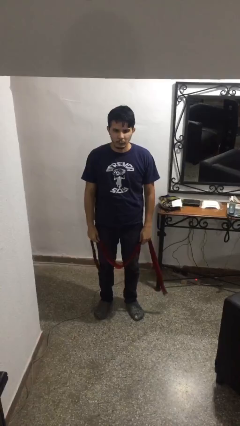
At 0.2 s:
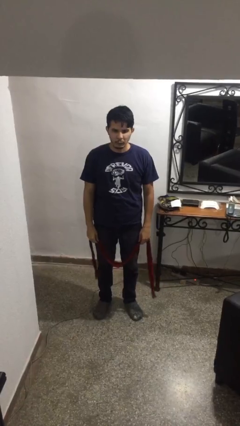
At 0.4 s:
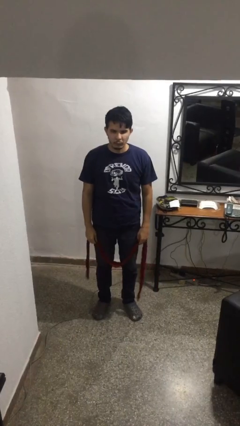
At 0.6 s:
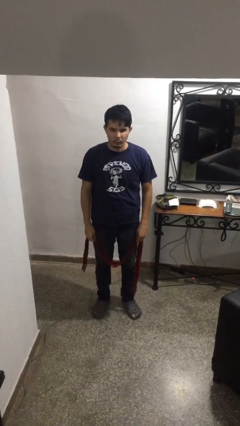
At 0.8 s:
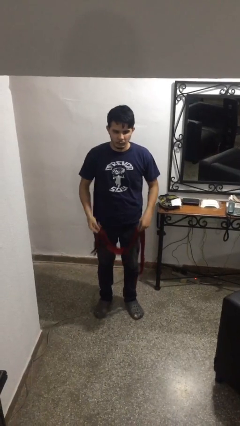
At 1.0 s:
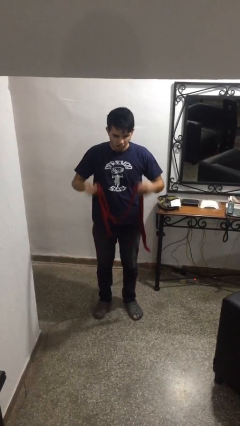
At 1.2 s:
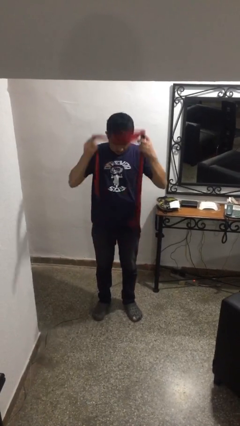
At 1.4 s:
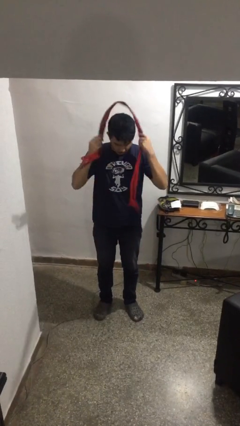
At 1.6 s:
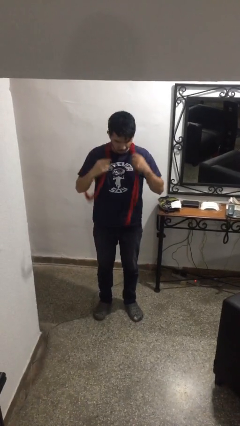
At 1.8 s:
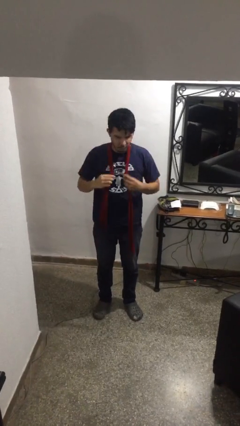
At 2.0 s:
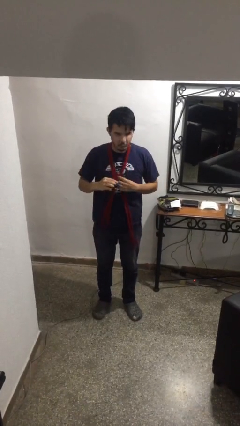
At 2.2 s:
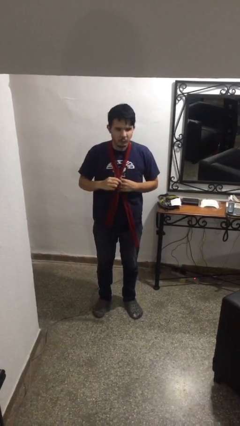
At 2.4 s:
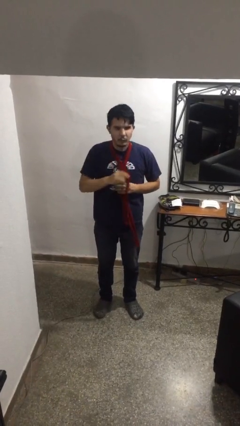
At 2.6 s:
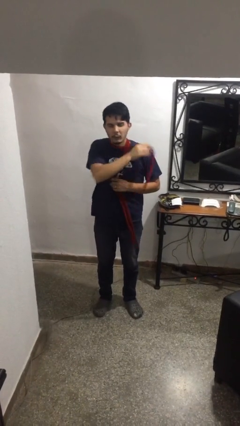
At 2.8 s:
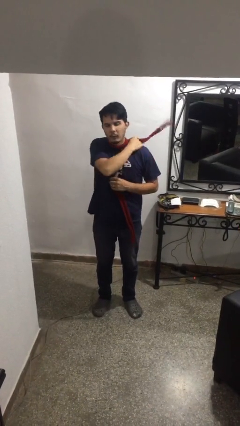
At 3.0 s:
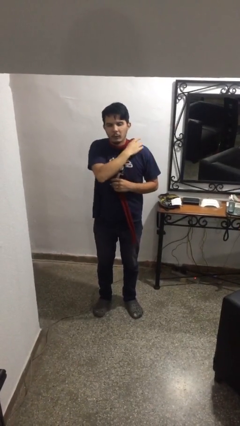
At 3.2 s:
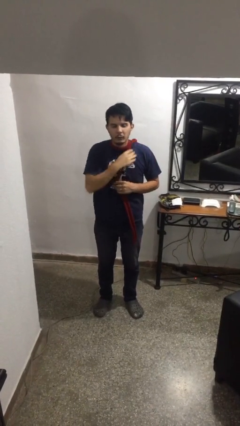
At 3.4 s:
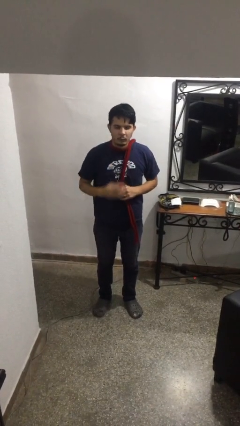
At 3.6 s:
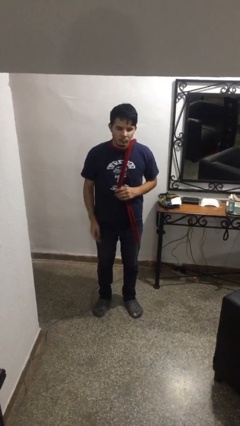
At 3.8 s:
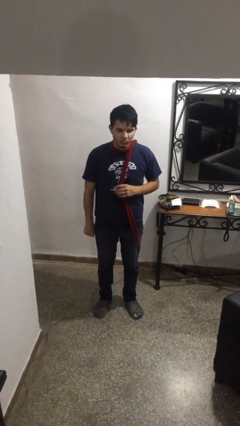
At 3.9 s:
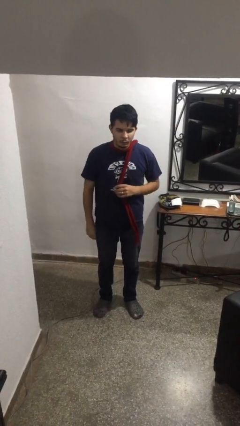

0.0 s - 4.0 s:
person puts on scarf

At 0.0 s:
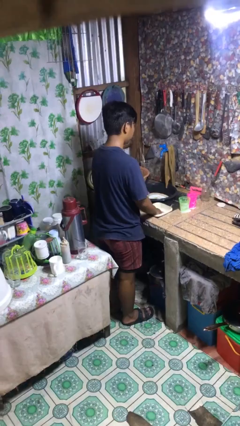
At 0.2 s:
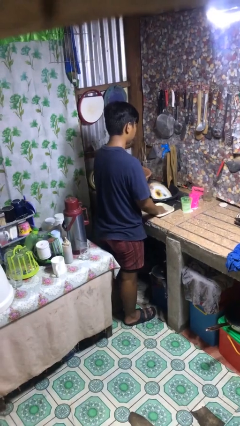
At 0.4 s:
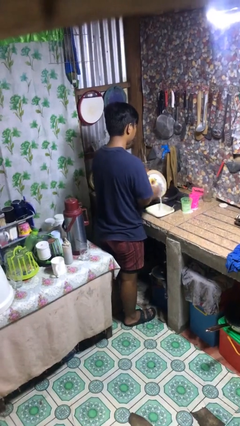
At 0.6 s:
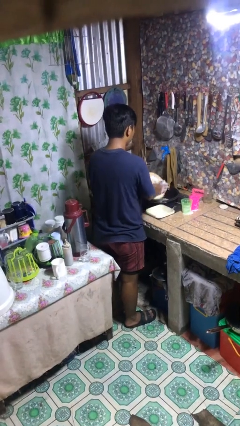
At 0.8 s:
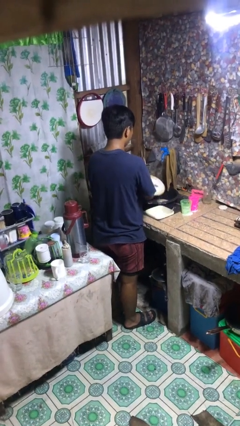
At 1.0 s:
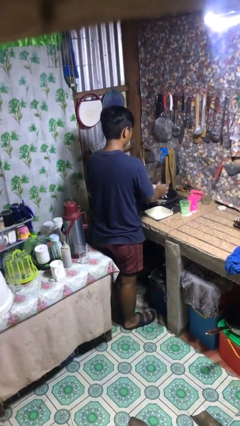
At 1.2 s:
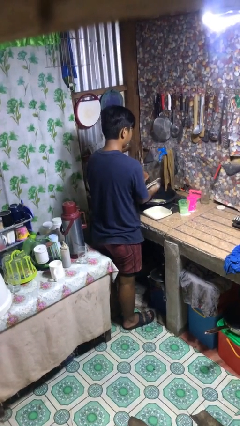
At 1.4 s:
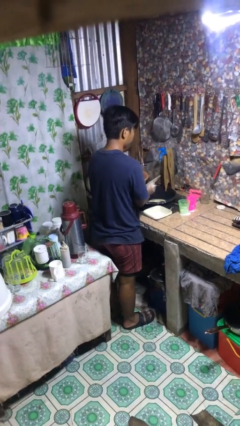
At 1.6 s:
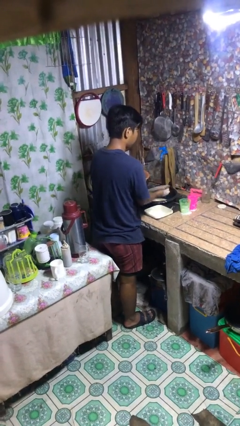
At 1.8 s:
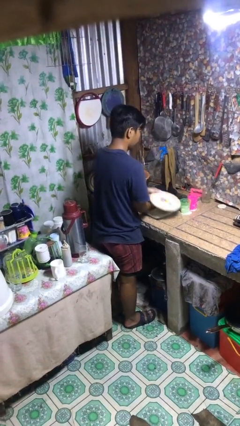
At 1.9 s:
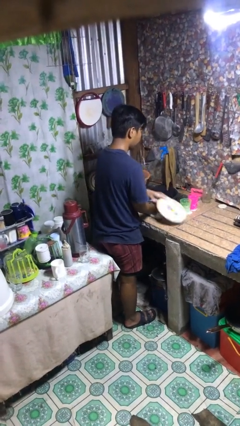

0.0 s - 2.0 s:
person washes dish

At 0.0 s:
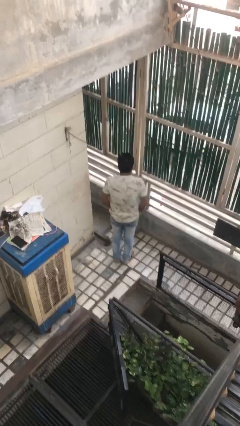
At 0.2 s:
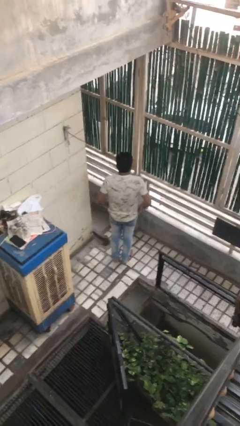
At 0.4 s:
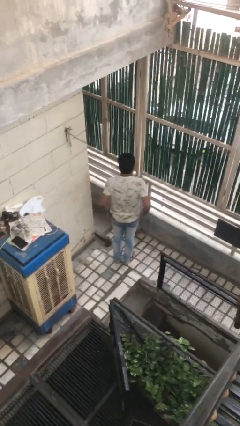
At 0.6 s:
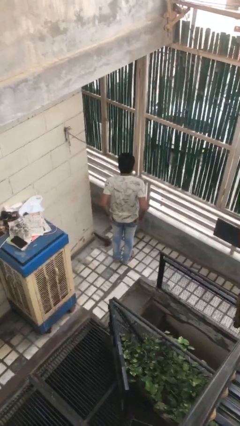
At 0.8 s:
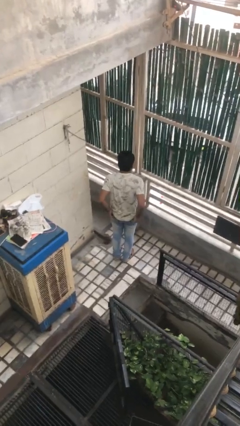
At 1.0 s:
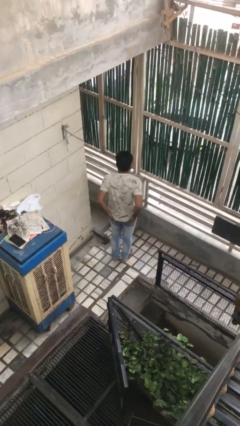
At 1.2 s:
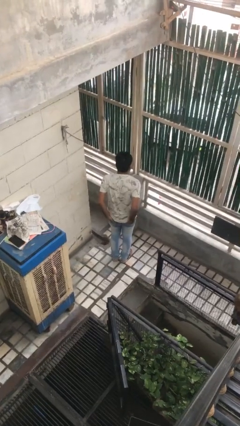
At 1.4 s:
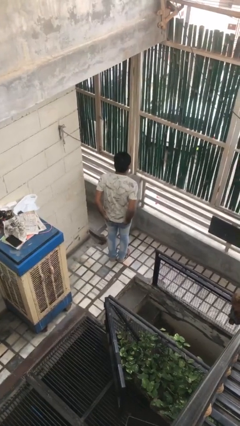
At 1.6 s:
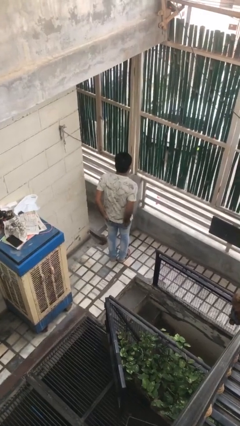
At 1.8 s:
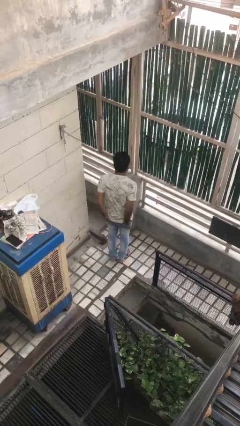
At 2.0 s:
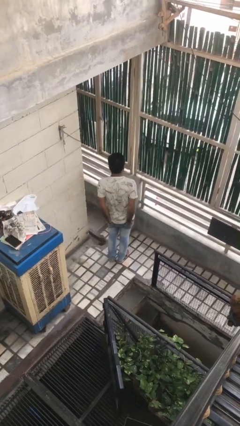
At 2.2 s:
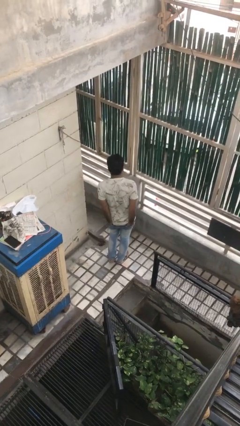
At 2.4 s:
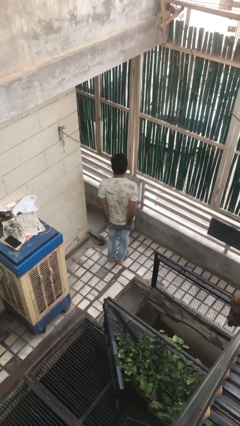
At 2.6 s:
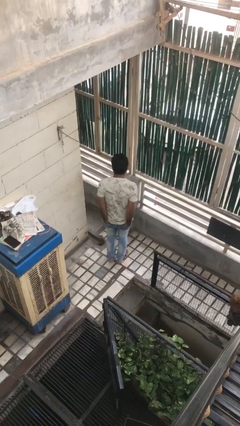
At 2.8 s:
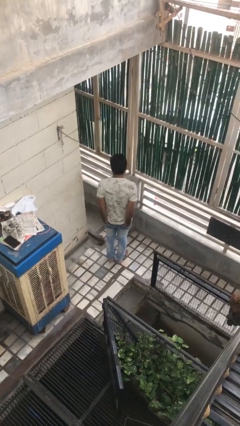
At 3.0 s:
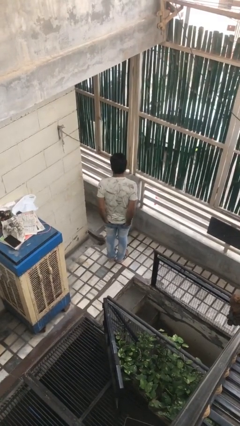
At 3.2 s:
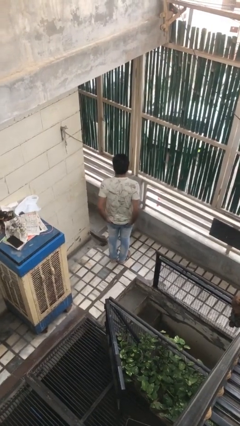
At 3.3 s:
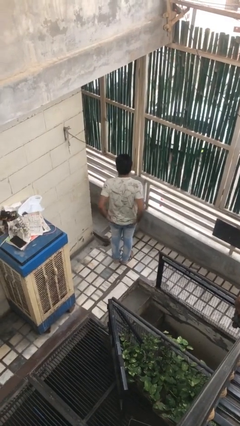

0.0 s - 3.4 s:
person puts hands in back pockets

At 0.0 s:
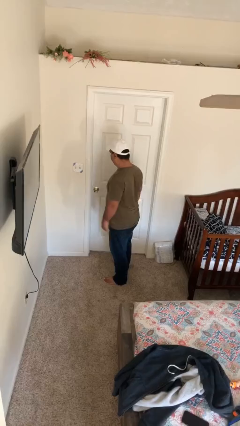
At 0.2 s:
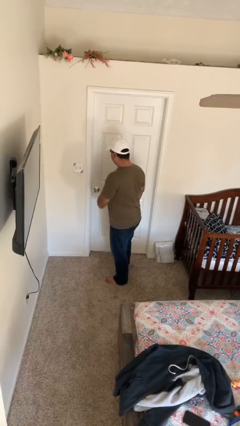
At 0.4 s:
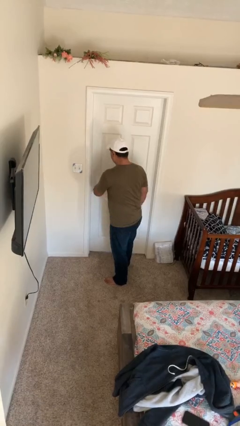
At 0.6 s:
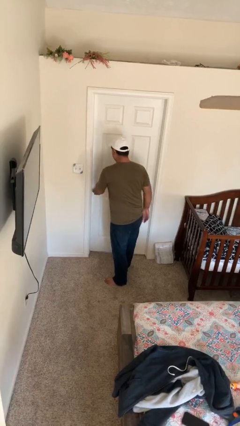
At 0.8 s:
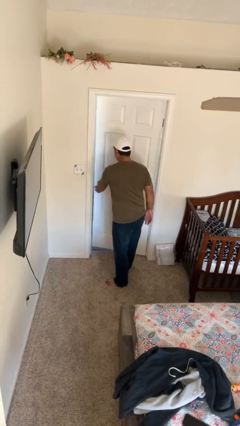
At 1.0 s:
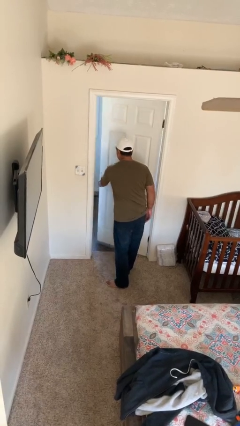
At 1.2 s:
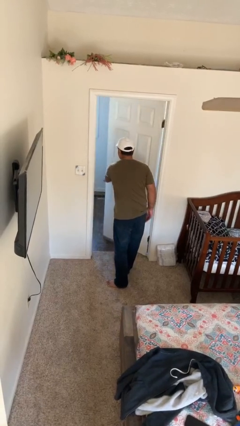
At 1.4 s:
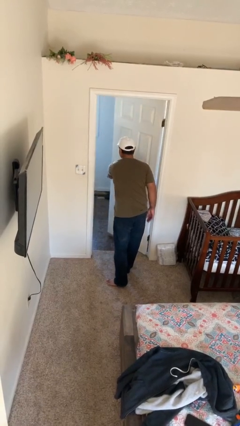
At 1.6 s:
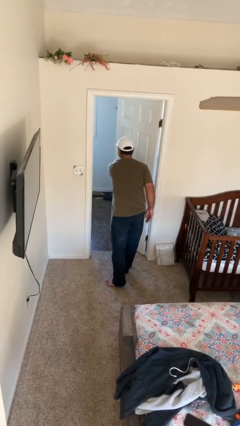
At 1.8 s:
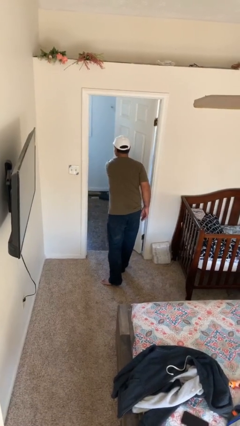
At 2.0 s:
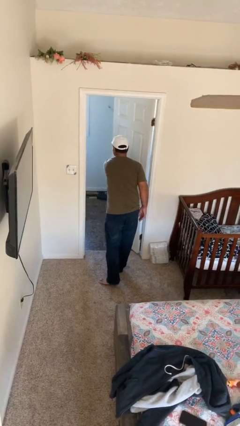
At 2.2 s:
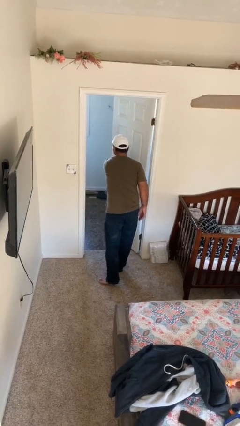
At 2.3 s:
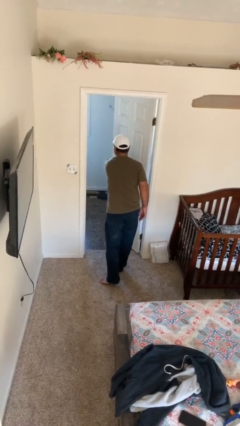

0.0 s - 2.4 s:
person opens facility door

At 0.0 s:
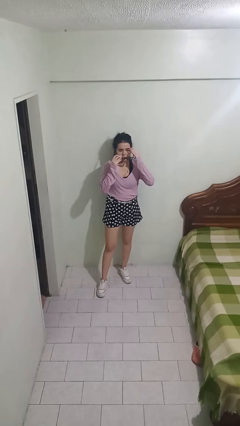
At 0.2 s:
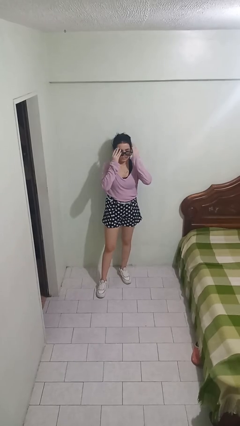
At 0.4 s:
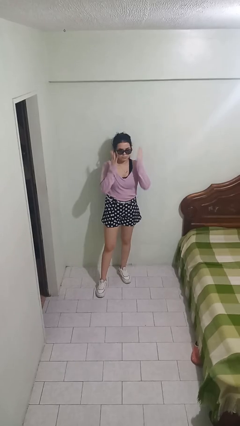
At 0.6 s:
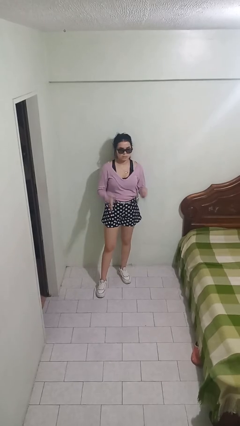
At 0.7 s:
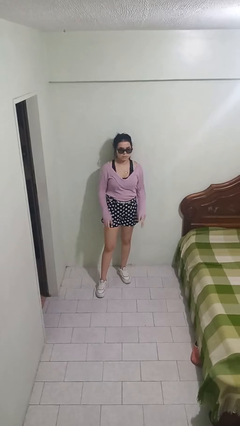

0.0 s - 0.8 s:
person puts on sunglasses

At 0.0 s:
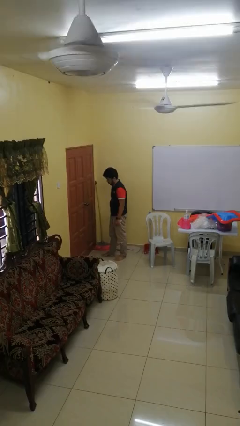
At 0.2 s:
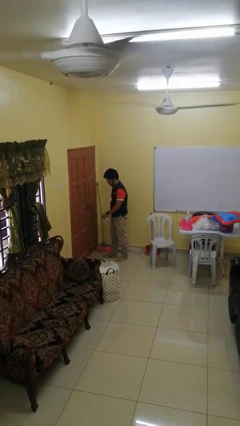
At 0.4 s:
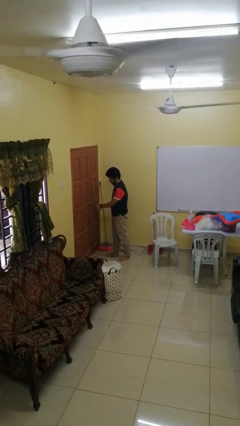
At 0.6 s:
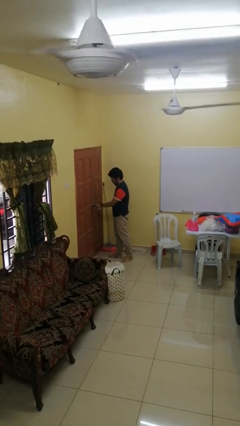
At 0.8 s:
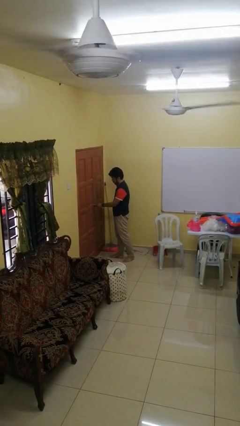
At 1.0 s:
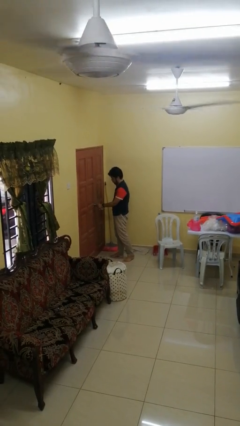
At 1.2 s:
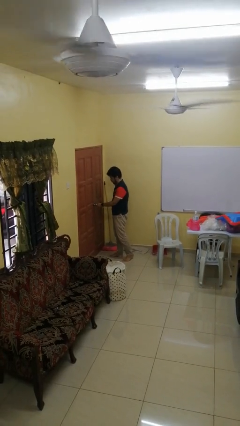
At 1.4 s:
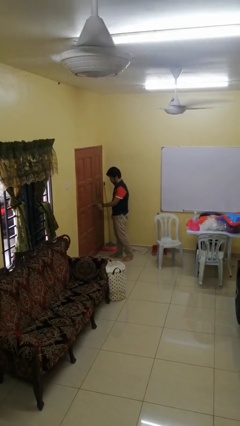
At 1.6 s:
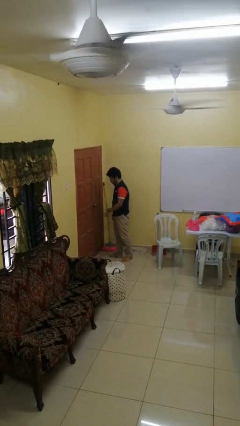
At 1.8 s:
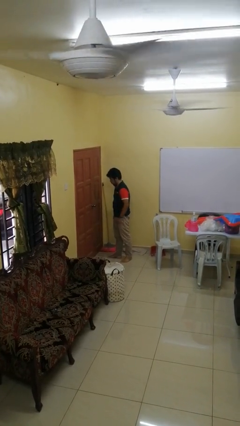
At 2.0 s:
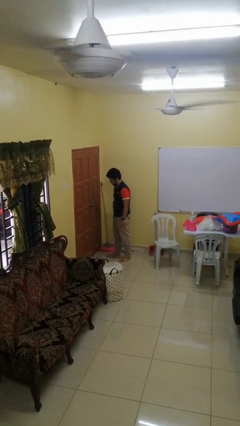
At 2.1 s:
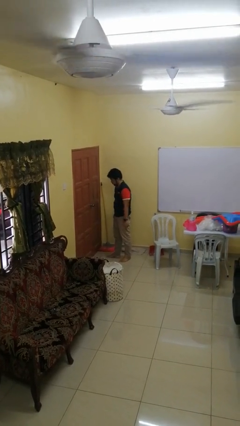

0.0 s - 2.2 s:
person unlocks door with keys

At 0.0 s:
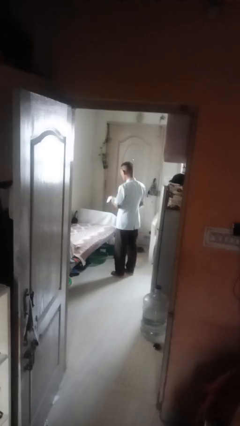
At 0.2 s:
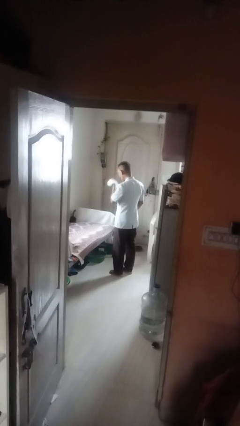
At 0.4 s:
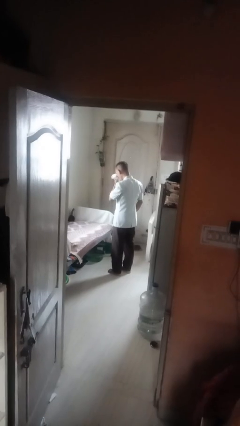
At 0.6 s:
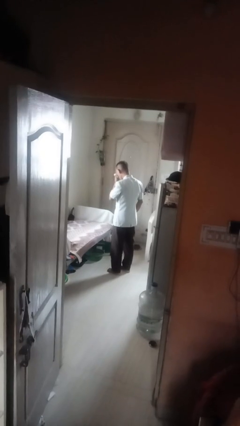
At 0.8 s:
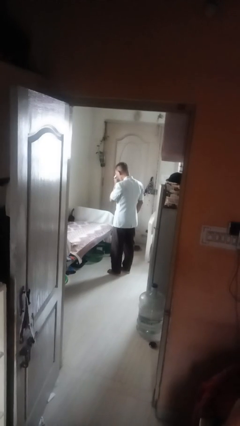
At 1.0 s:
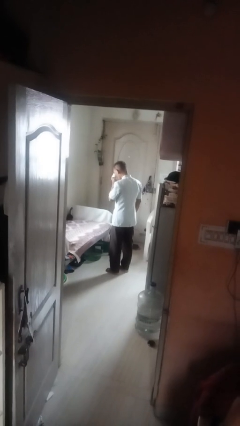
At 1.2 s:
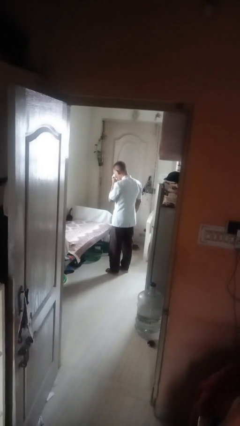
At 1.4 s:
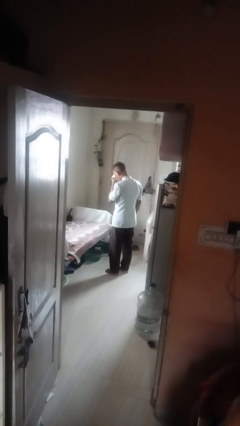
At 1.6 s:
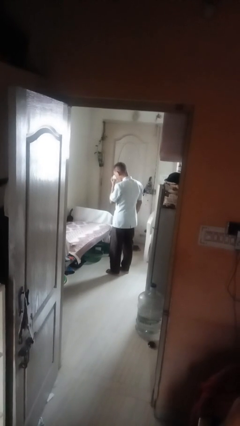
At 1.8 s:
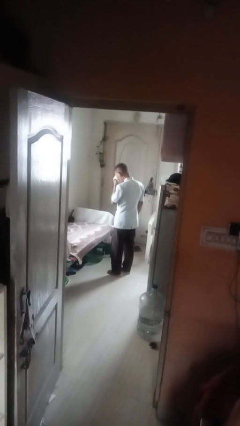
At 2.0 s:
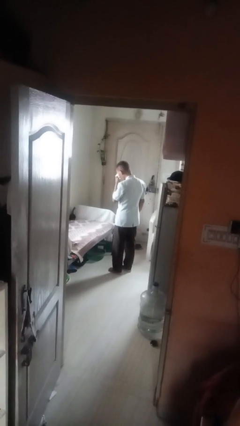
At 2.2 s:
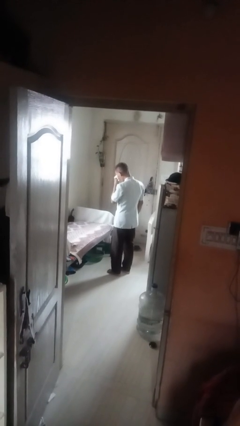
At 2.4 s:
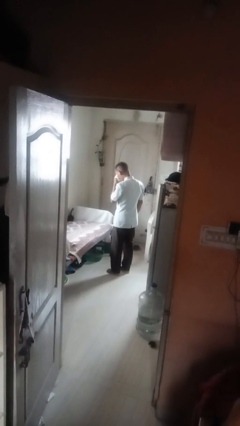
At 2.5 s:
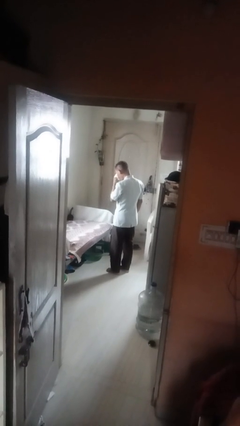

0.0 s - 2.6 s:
person blows nose
